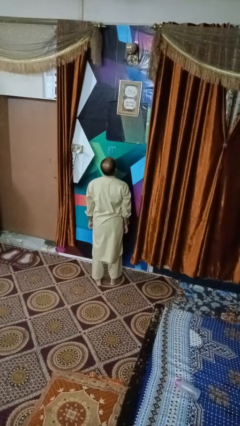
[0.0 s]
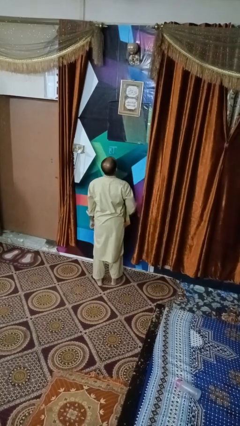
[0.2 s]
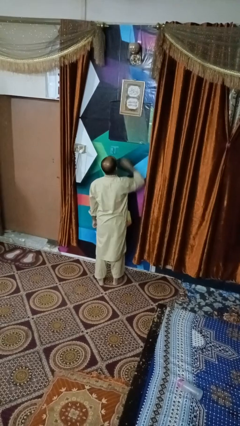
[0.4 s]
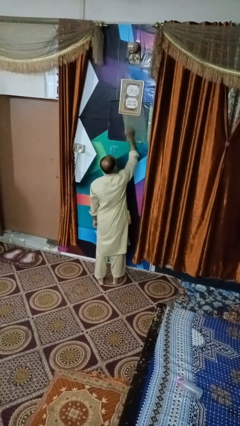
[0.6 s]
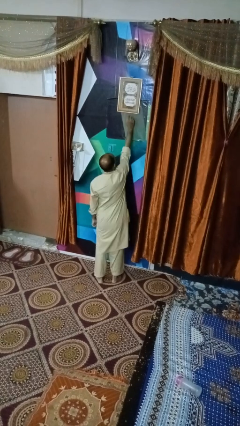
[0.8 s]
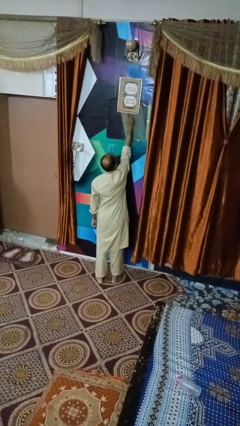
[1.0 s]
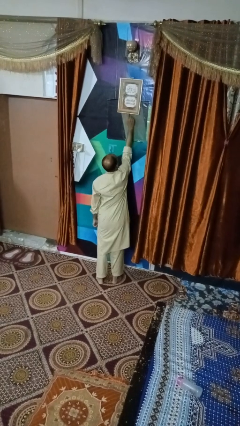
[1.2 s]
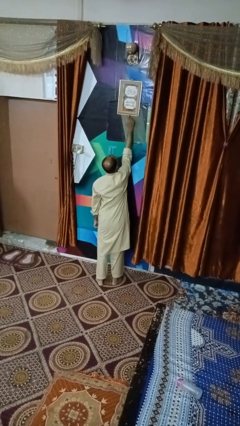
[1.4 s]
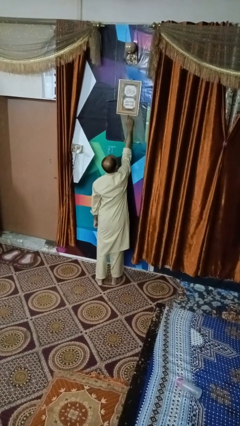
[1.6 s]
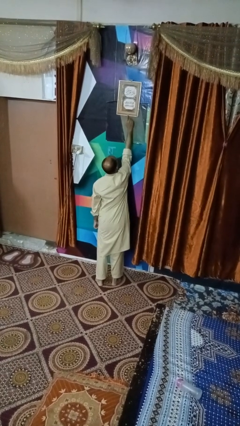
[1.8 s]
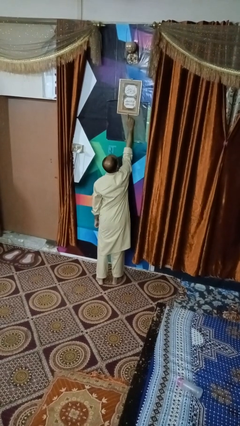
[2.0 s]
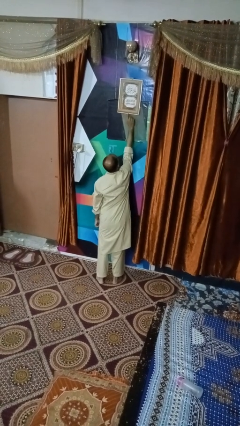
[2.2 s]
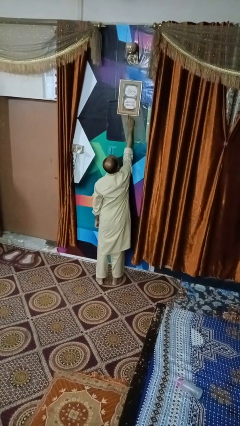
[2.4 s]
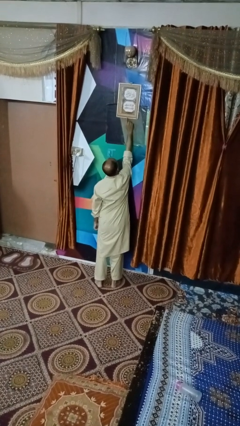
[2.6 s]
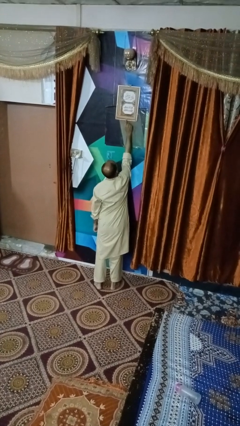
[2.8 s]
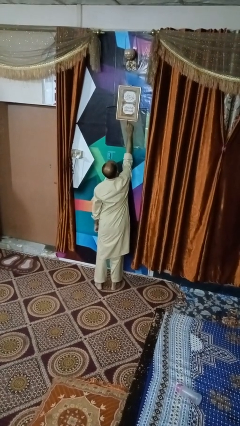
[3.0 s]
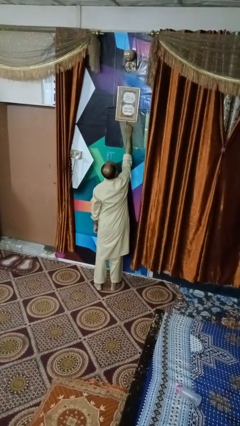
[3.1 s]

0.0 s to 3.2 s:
person taps object with finger

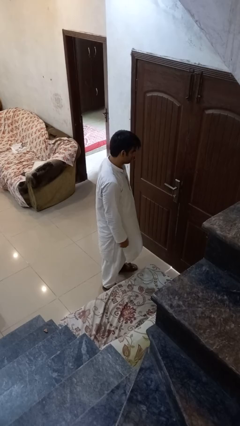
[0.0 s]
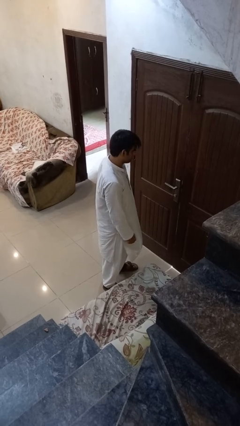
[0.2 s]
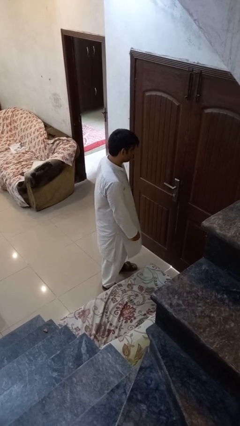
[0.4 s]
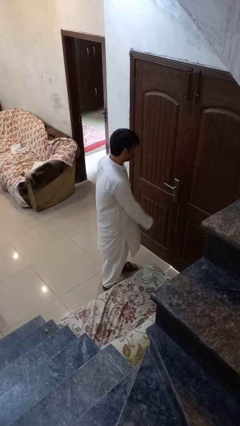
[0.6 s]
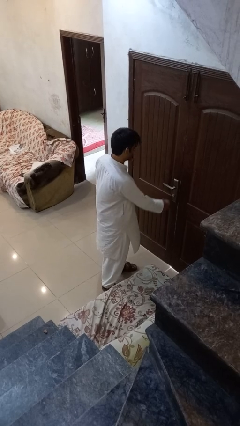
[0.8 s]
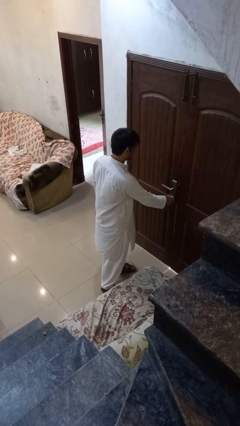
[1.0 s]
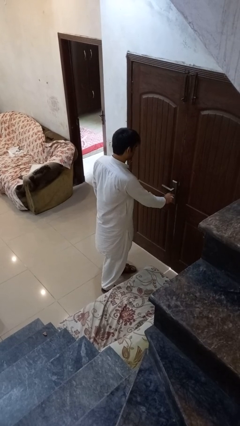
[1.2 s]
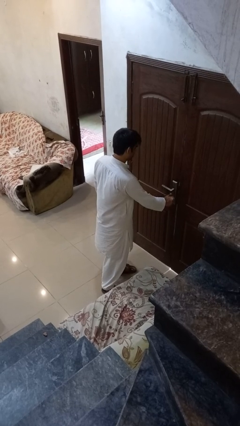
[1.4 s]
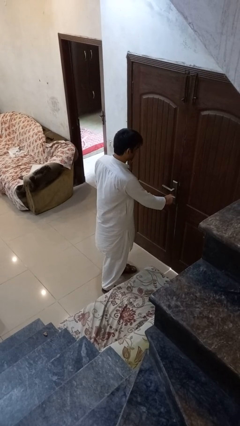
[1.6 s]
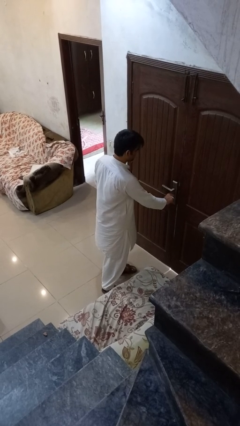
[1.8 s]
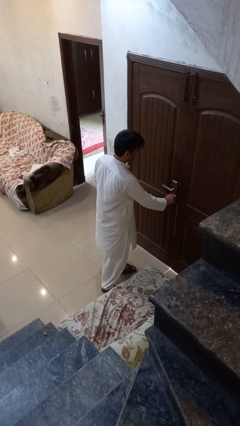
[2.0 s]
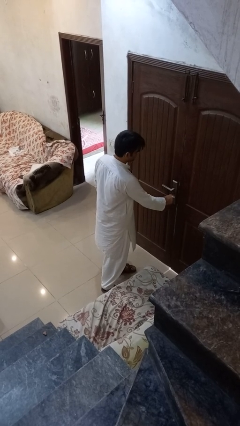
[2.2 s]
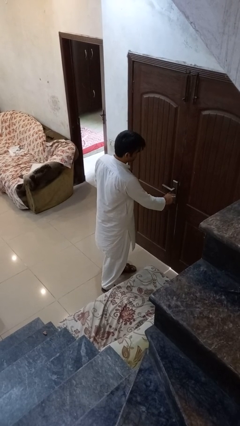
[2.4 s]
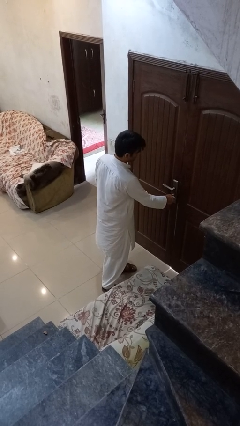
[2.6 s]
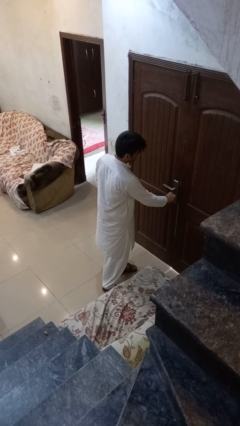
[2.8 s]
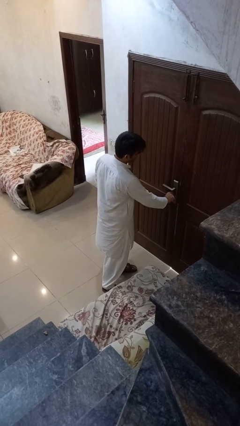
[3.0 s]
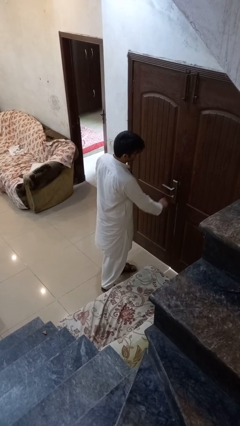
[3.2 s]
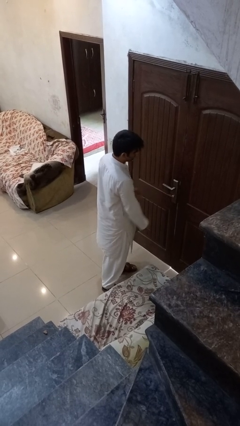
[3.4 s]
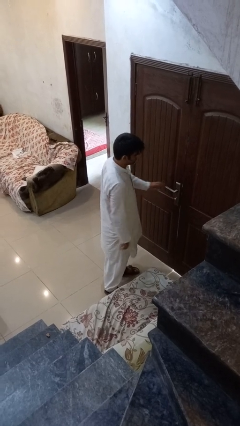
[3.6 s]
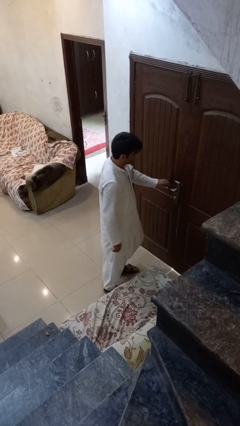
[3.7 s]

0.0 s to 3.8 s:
person unlocks door with keys

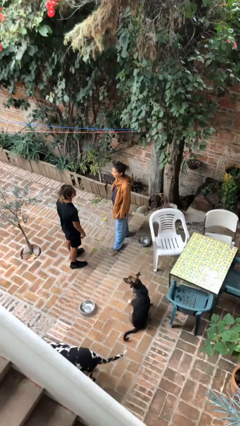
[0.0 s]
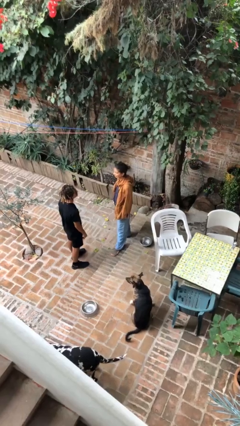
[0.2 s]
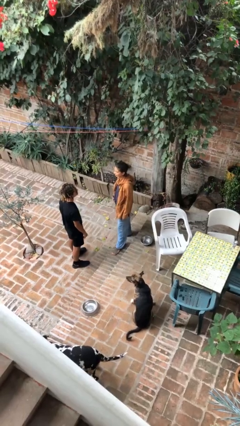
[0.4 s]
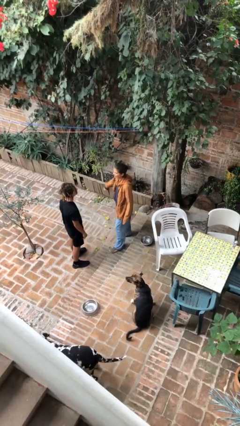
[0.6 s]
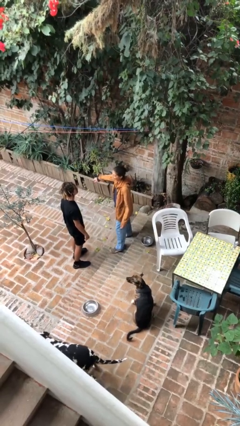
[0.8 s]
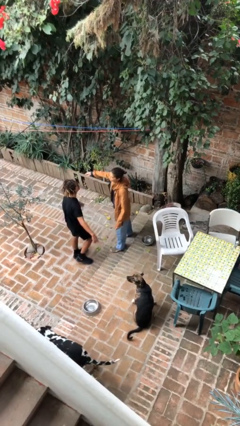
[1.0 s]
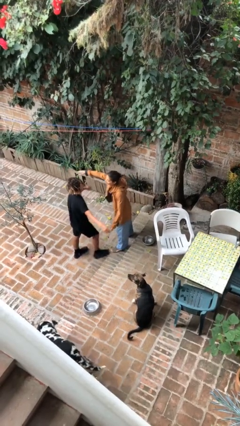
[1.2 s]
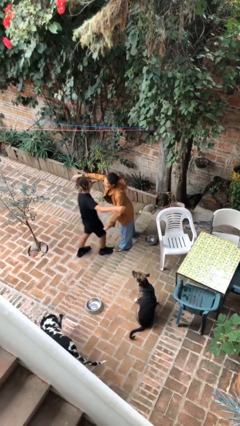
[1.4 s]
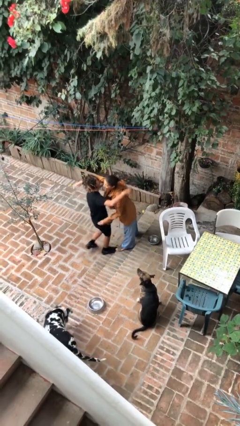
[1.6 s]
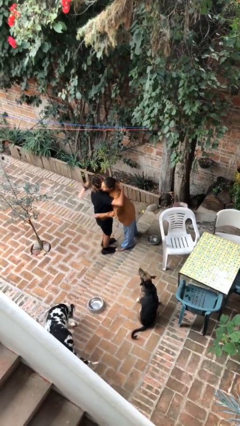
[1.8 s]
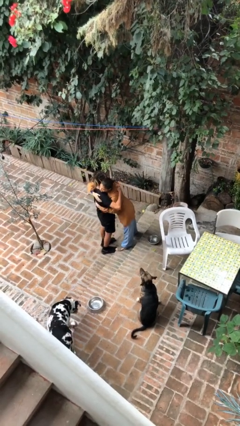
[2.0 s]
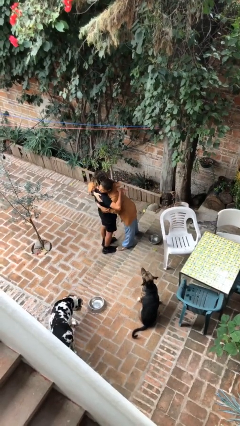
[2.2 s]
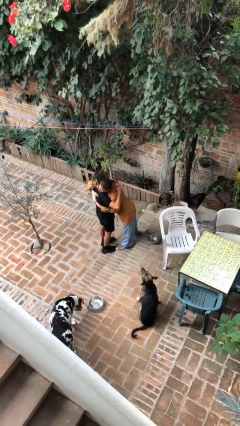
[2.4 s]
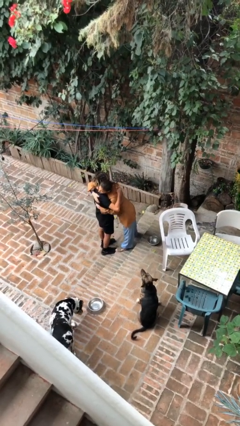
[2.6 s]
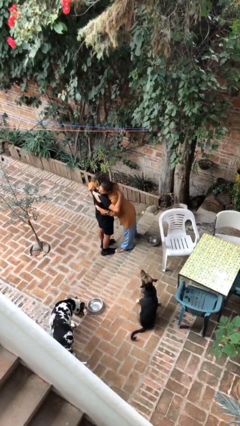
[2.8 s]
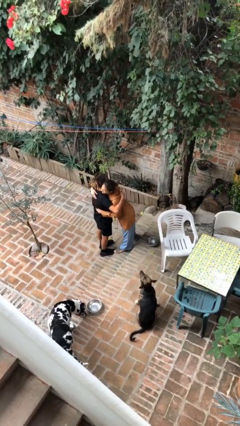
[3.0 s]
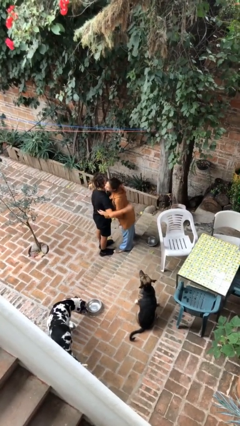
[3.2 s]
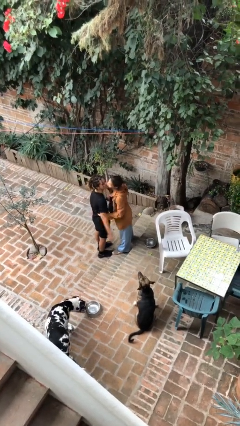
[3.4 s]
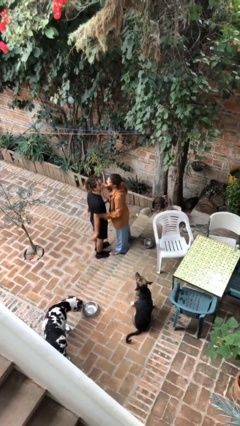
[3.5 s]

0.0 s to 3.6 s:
person embraces person

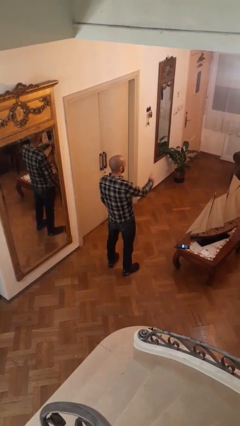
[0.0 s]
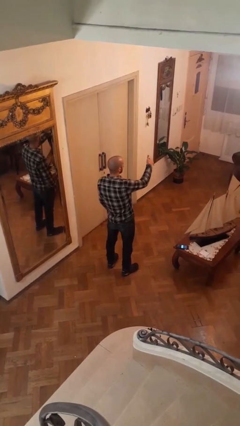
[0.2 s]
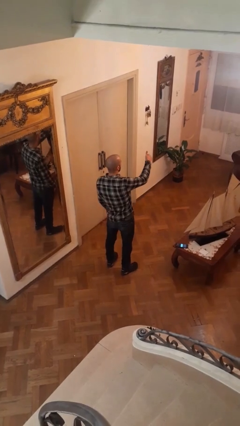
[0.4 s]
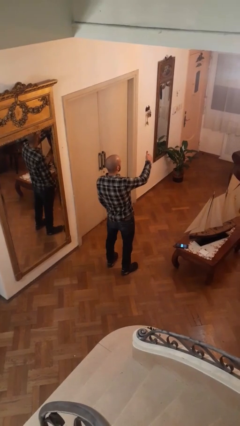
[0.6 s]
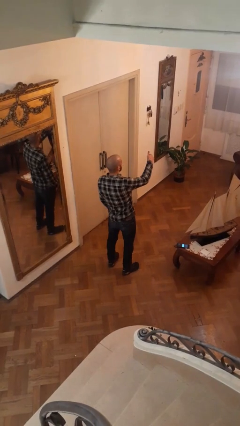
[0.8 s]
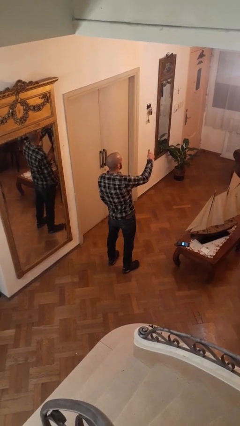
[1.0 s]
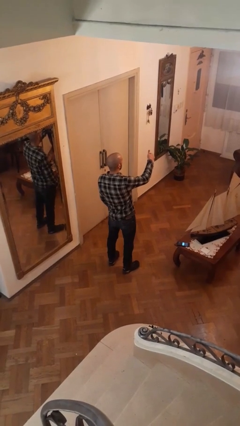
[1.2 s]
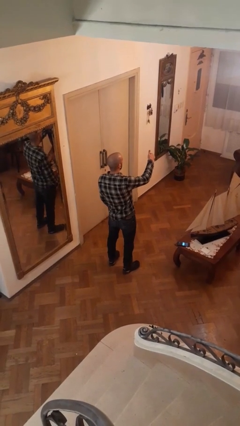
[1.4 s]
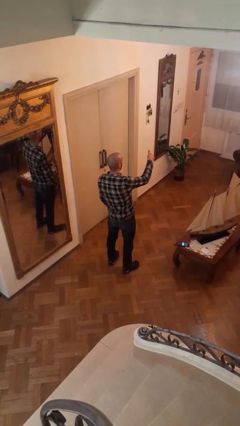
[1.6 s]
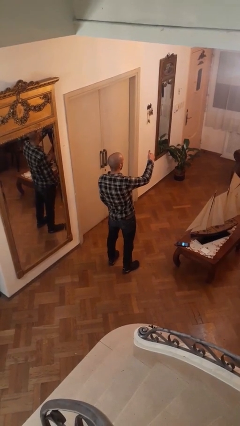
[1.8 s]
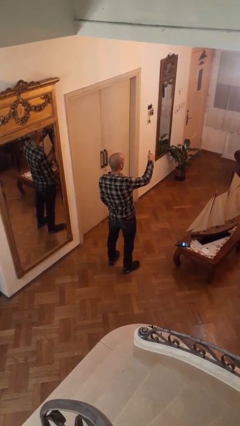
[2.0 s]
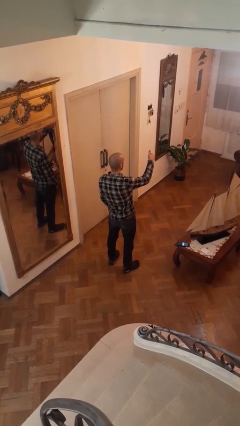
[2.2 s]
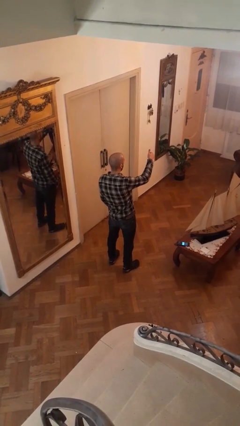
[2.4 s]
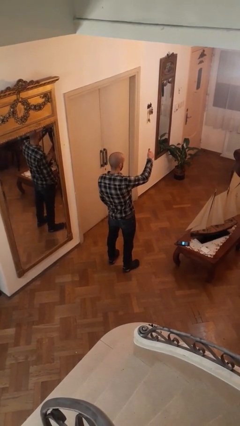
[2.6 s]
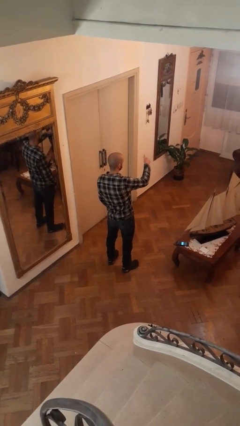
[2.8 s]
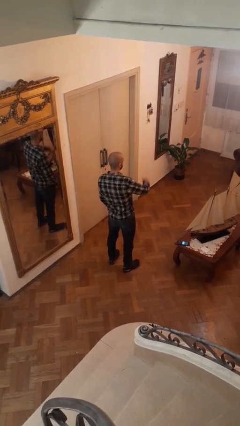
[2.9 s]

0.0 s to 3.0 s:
person gestures thumbs up

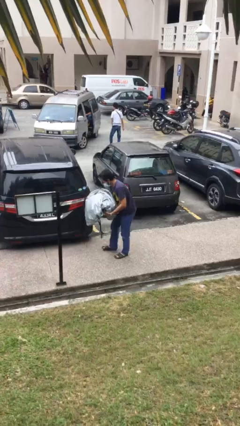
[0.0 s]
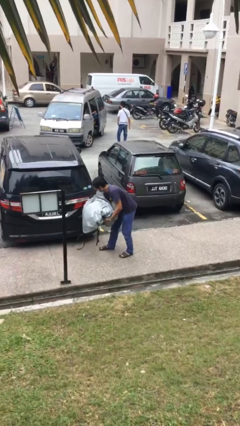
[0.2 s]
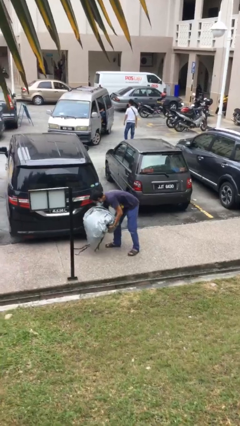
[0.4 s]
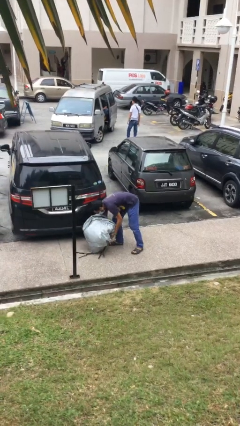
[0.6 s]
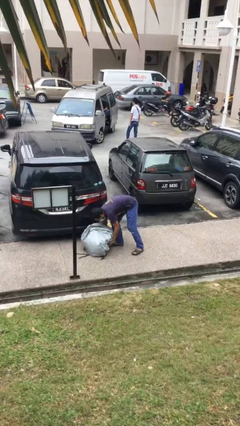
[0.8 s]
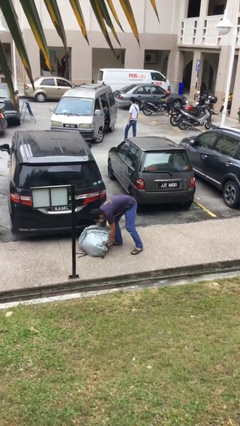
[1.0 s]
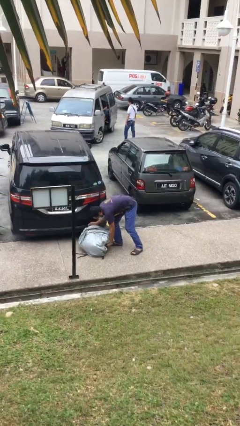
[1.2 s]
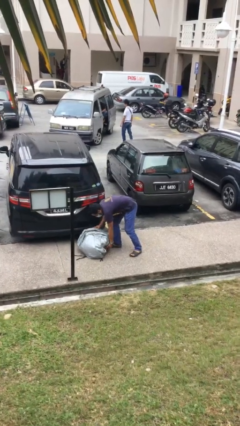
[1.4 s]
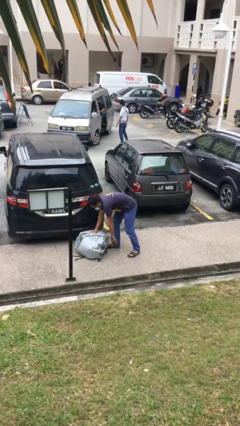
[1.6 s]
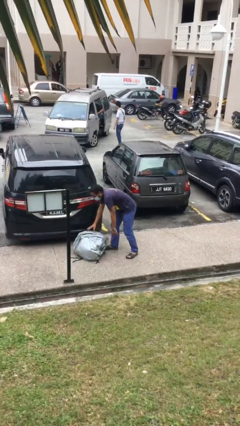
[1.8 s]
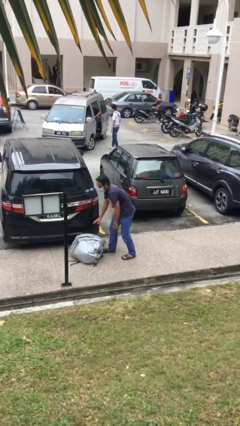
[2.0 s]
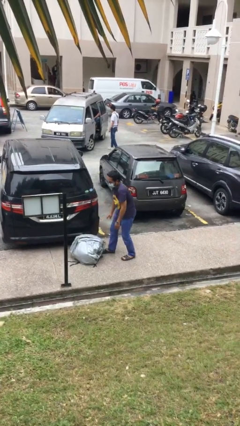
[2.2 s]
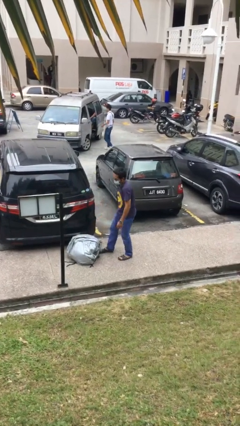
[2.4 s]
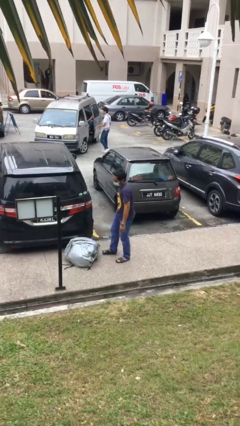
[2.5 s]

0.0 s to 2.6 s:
person puts down object on floor

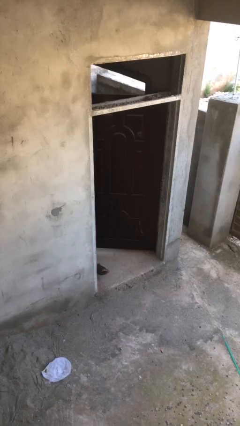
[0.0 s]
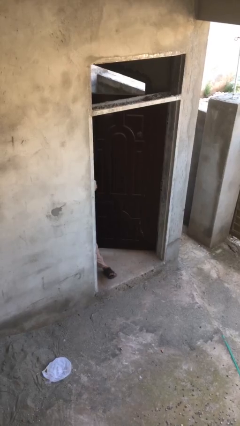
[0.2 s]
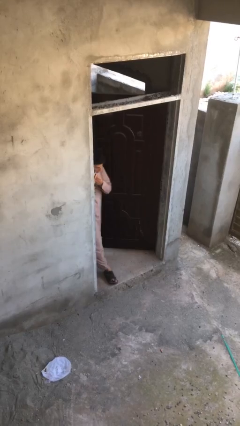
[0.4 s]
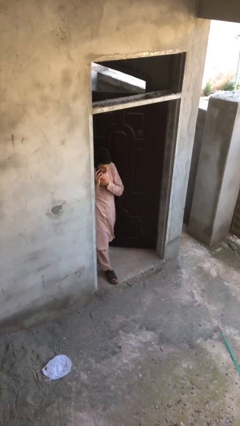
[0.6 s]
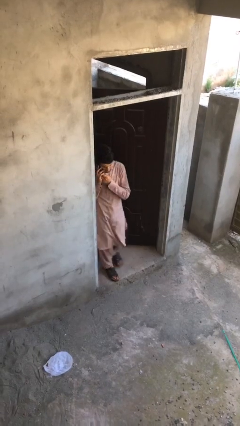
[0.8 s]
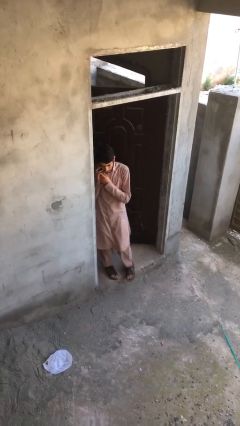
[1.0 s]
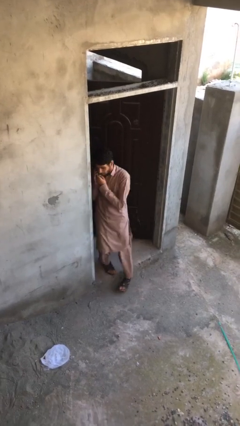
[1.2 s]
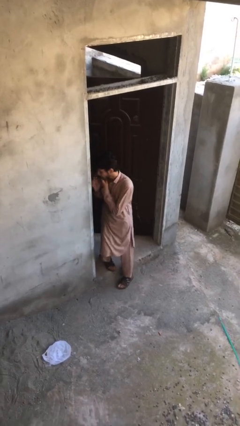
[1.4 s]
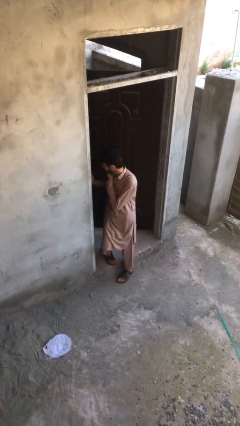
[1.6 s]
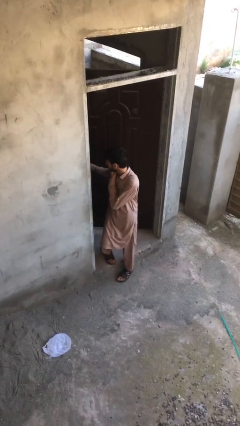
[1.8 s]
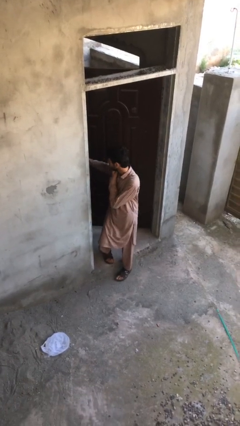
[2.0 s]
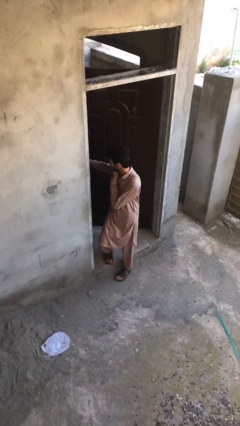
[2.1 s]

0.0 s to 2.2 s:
person enters scene through structure
